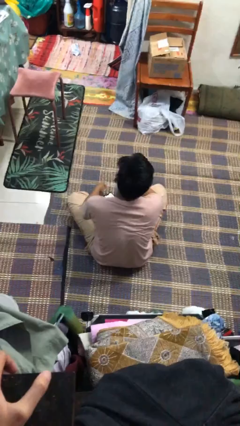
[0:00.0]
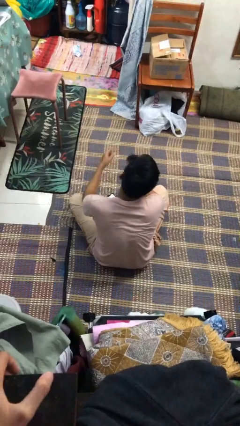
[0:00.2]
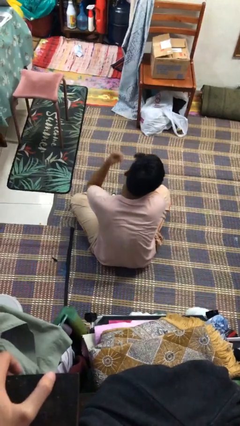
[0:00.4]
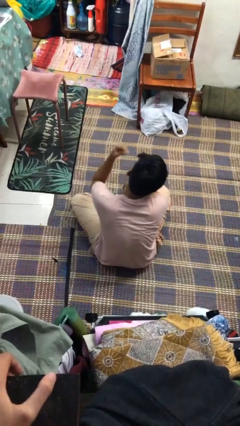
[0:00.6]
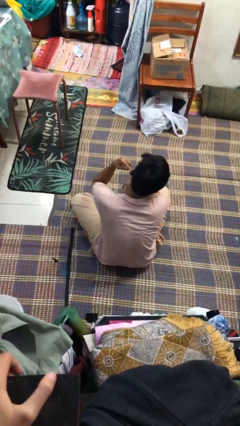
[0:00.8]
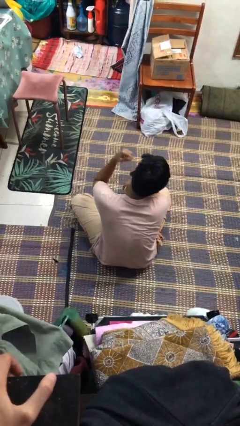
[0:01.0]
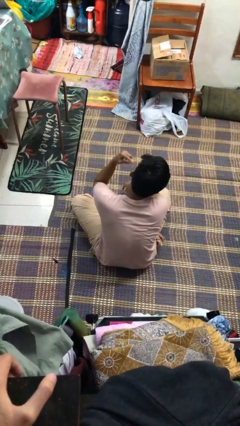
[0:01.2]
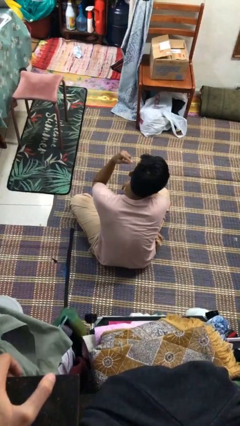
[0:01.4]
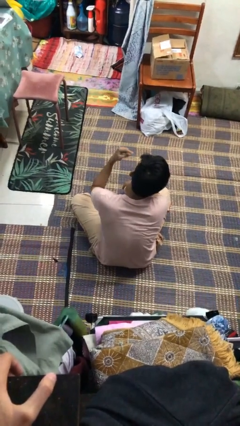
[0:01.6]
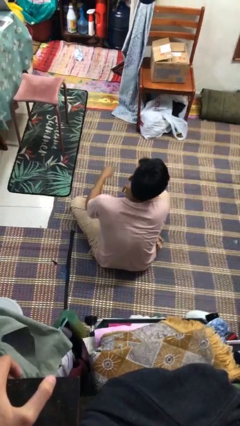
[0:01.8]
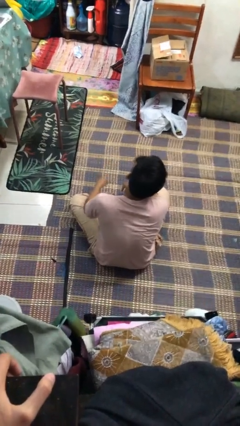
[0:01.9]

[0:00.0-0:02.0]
person gestures listen closely

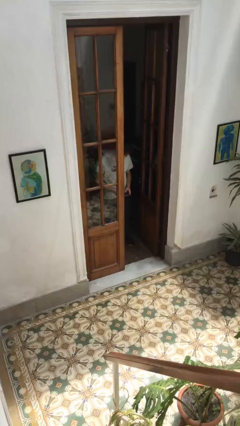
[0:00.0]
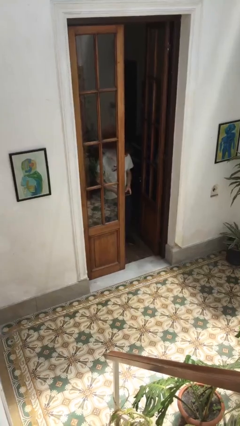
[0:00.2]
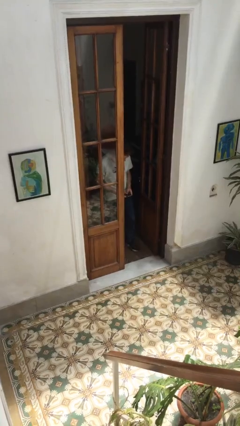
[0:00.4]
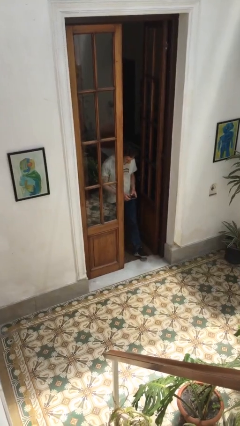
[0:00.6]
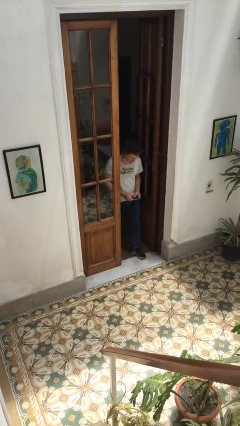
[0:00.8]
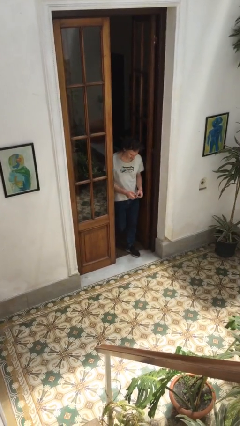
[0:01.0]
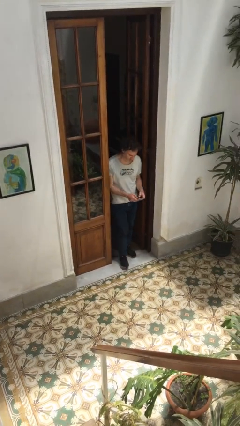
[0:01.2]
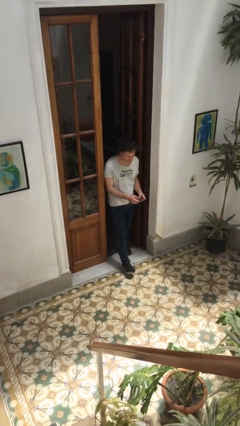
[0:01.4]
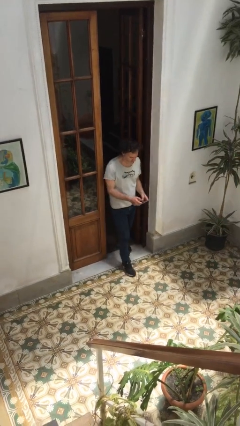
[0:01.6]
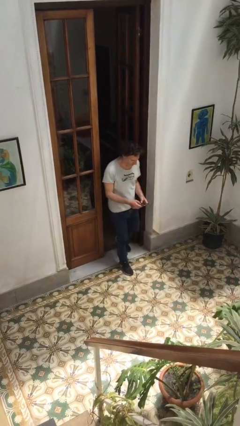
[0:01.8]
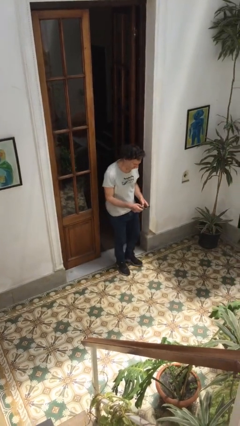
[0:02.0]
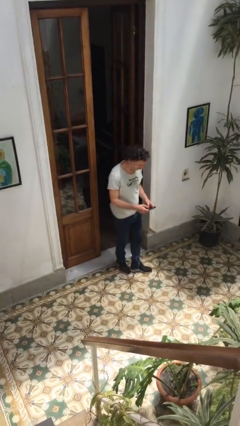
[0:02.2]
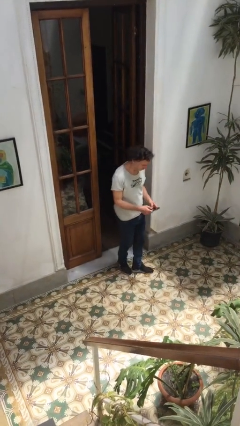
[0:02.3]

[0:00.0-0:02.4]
person enters scene through structure

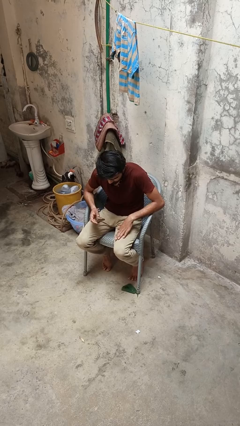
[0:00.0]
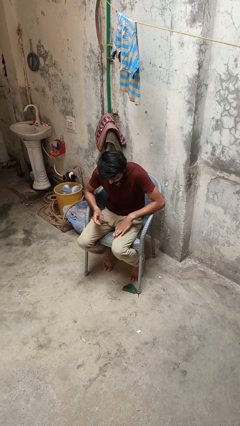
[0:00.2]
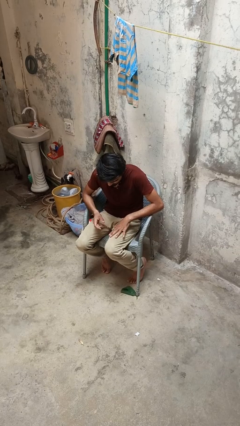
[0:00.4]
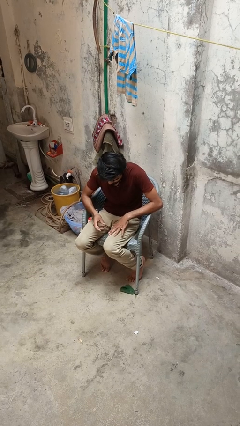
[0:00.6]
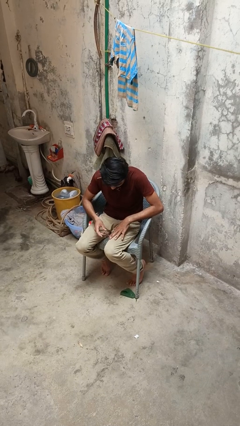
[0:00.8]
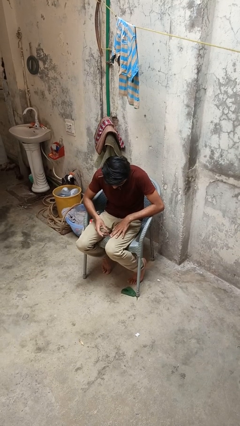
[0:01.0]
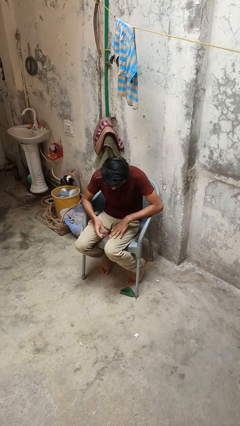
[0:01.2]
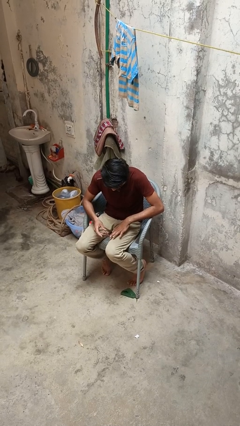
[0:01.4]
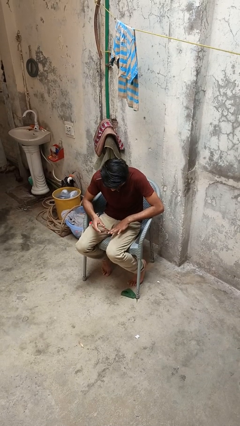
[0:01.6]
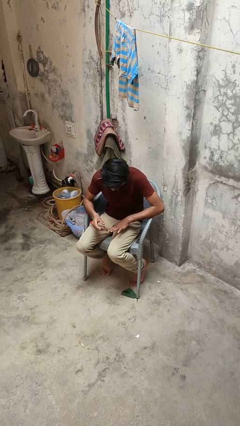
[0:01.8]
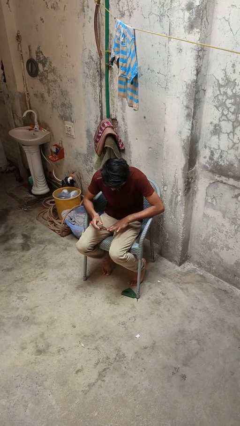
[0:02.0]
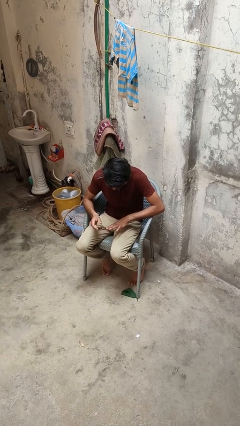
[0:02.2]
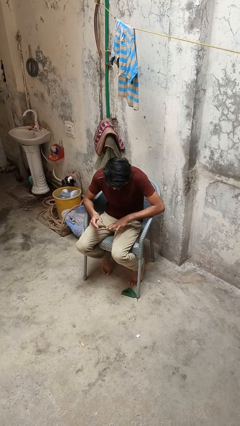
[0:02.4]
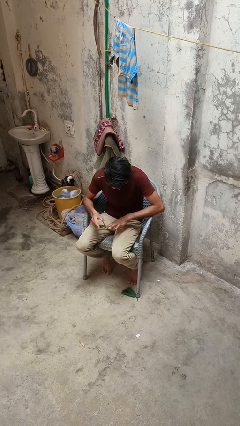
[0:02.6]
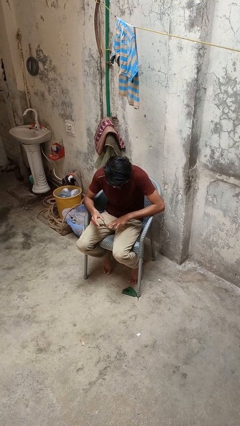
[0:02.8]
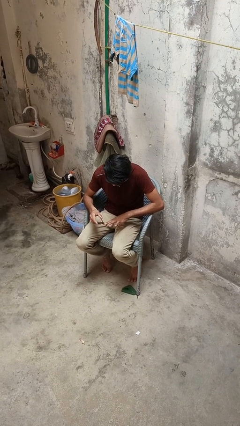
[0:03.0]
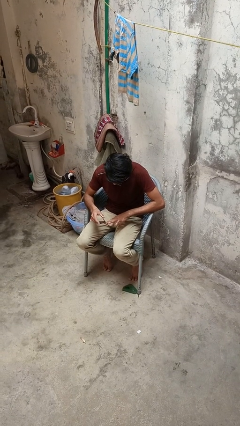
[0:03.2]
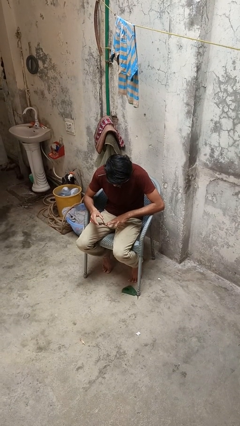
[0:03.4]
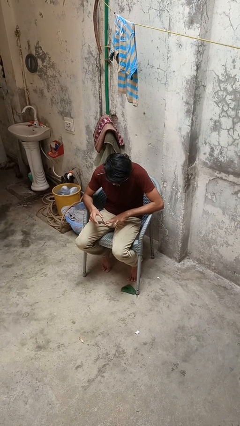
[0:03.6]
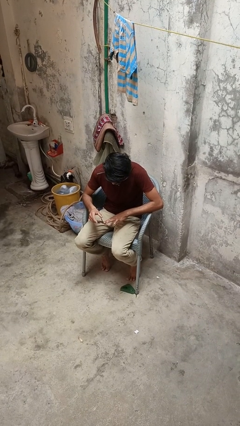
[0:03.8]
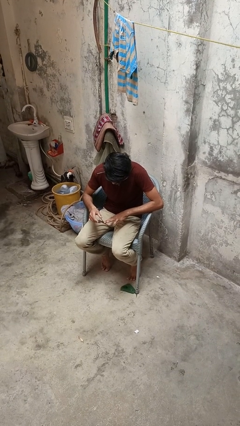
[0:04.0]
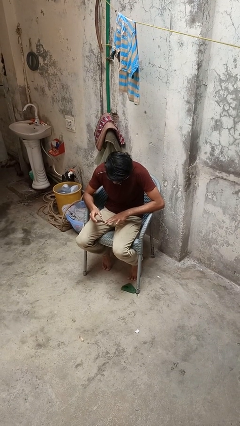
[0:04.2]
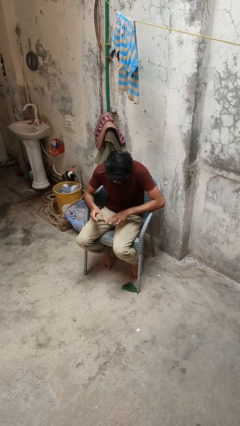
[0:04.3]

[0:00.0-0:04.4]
person clips fingernails

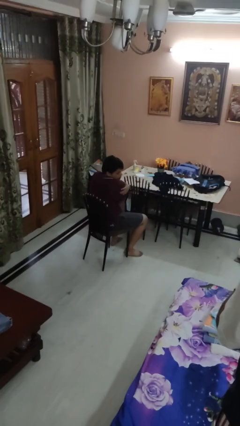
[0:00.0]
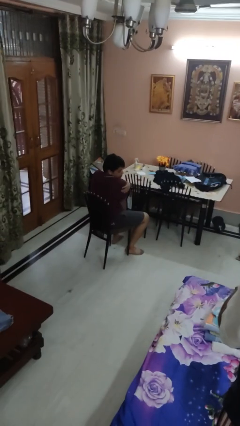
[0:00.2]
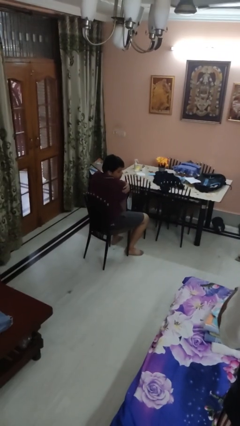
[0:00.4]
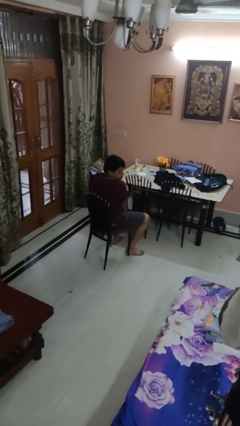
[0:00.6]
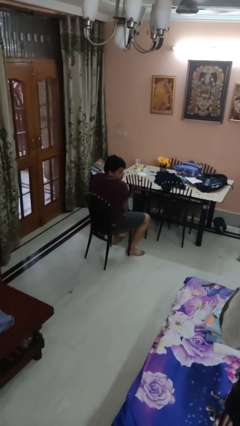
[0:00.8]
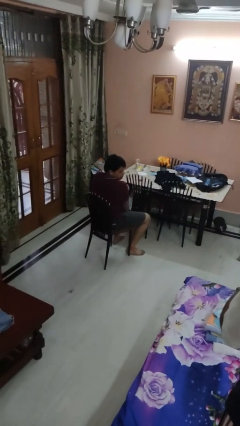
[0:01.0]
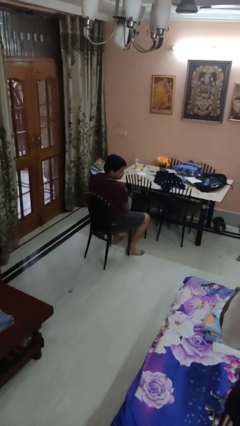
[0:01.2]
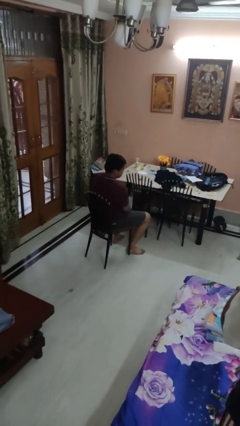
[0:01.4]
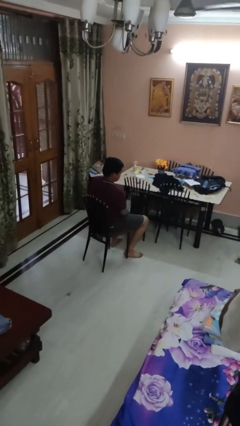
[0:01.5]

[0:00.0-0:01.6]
person swats bug

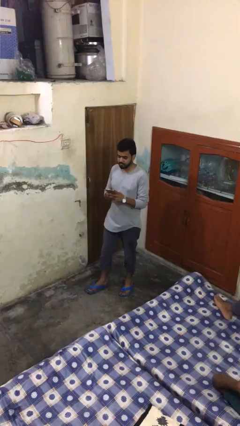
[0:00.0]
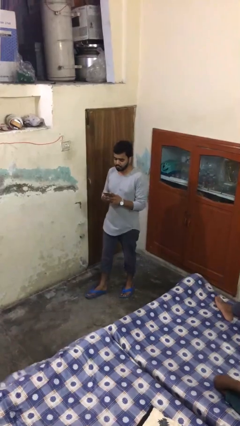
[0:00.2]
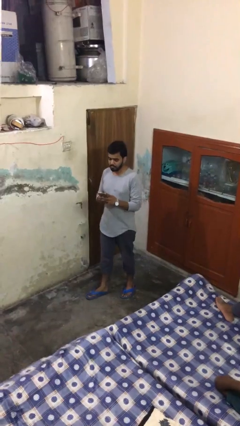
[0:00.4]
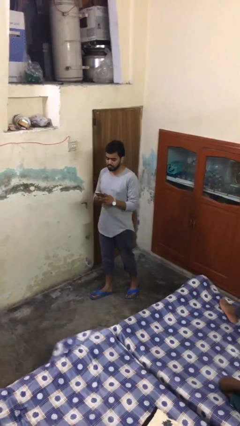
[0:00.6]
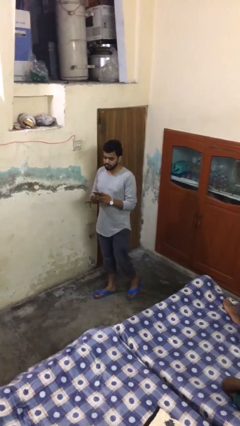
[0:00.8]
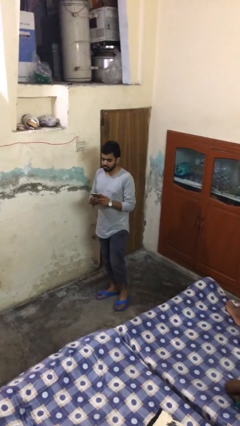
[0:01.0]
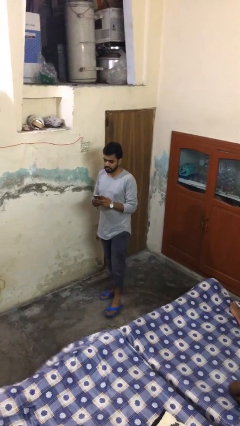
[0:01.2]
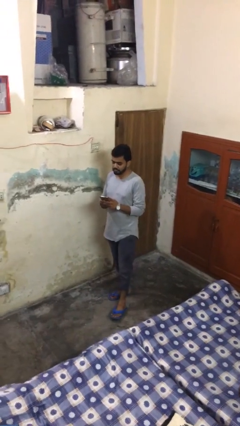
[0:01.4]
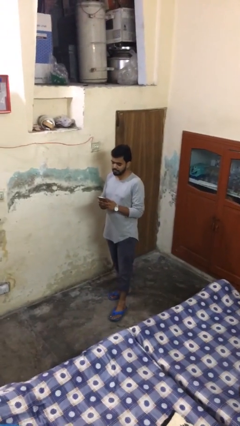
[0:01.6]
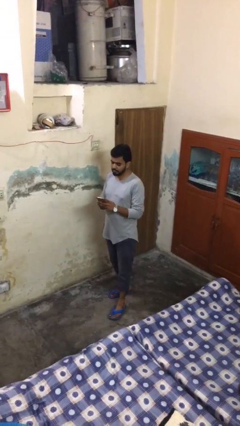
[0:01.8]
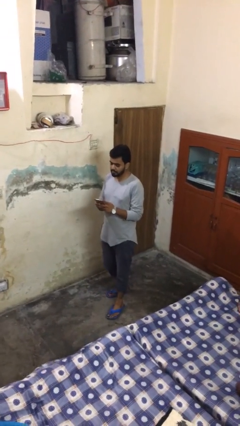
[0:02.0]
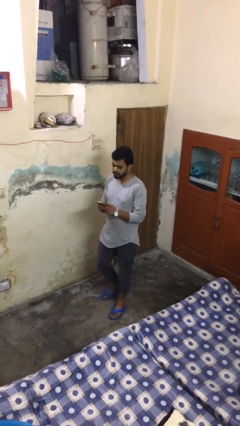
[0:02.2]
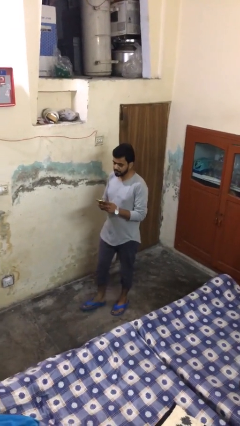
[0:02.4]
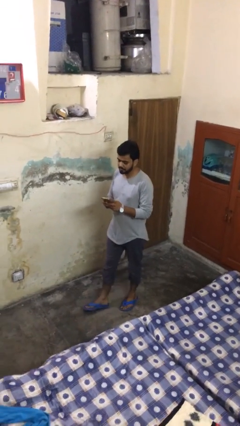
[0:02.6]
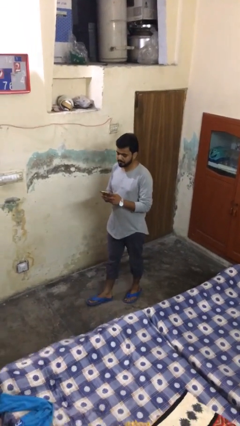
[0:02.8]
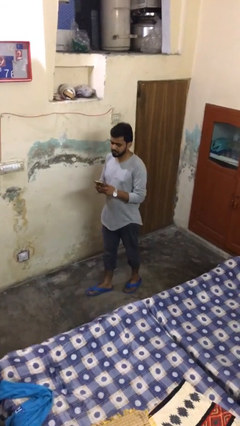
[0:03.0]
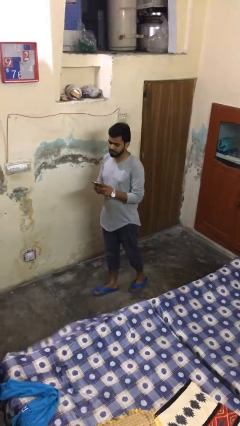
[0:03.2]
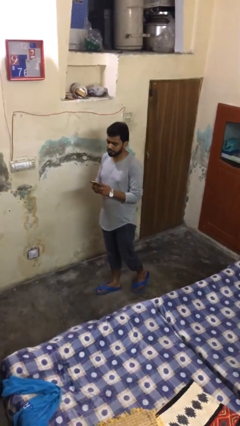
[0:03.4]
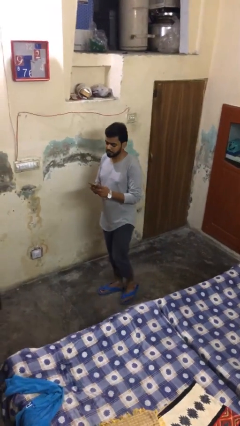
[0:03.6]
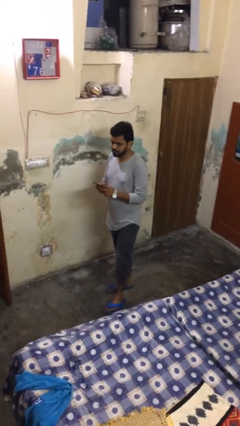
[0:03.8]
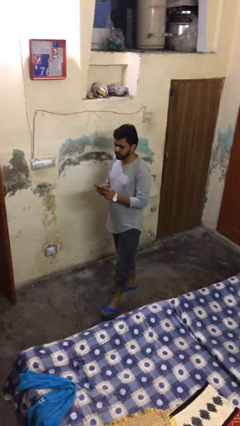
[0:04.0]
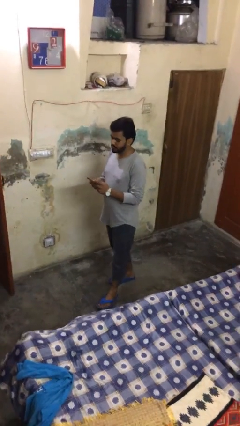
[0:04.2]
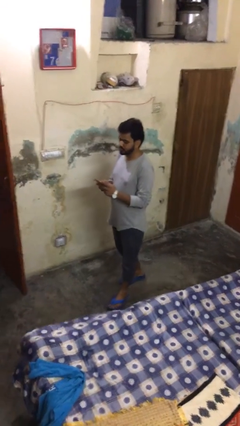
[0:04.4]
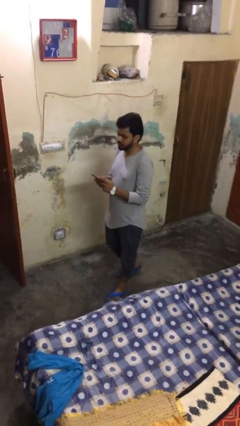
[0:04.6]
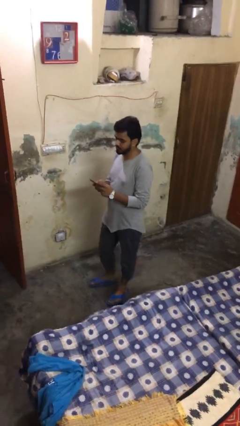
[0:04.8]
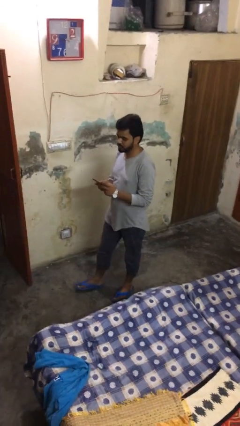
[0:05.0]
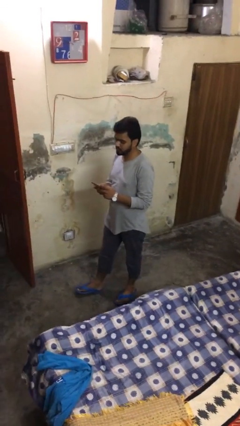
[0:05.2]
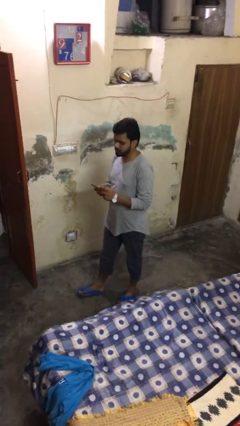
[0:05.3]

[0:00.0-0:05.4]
person texts on phone

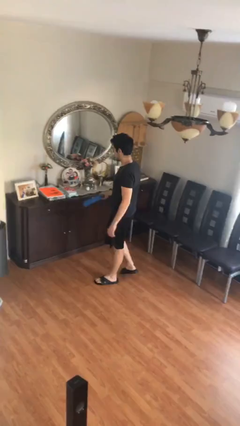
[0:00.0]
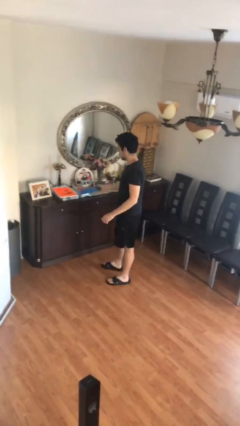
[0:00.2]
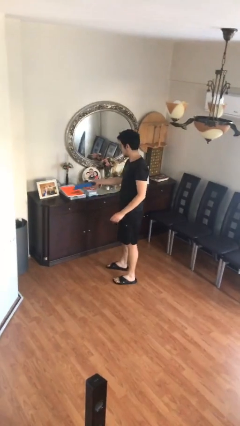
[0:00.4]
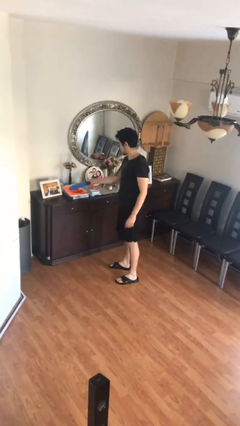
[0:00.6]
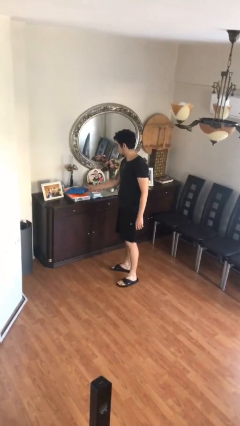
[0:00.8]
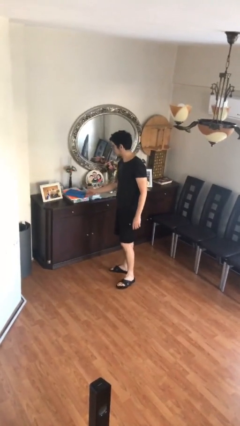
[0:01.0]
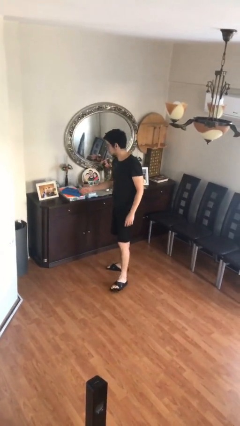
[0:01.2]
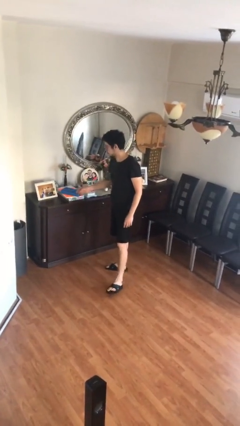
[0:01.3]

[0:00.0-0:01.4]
person puts down object on table

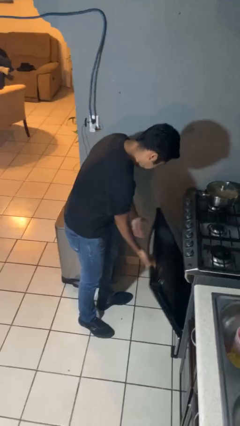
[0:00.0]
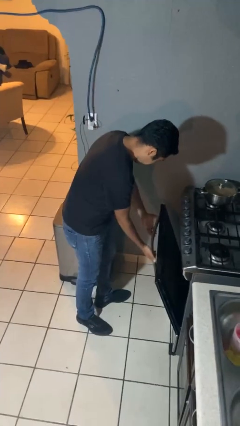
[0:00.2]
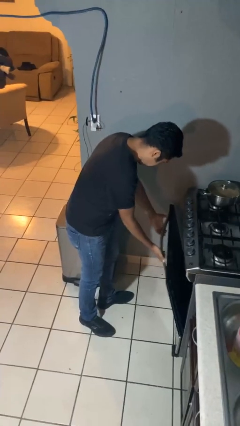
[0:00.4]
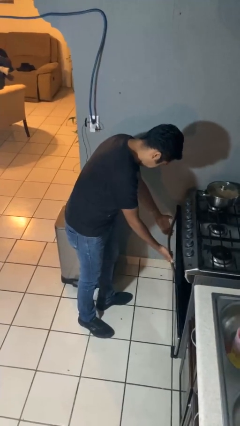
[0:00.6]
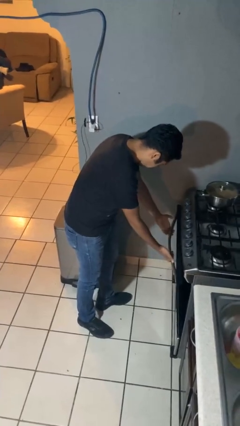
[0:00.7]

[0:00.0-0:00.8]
person closes oven door
